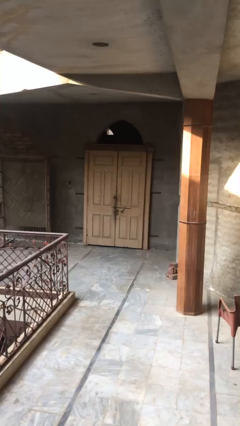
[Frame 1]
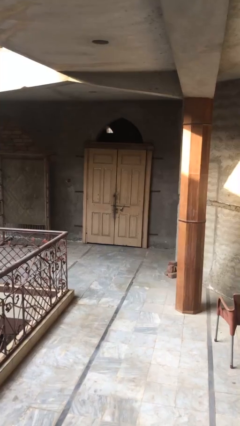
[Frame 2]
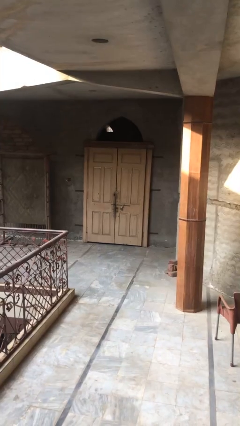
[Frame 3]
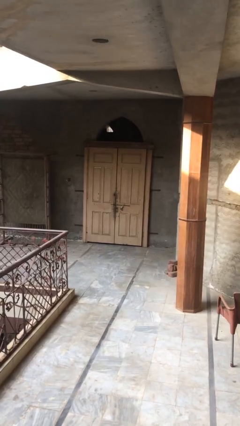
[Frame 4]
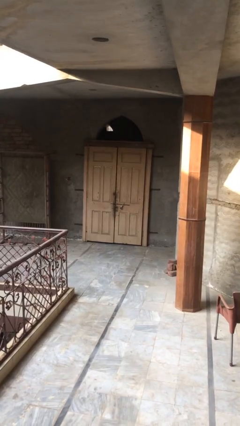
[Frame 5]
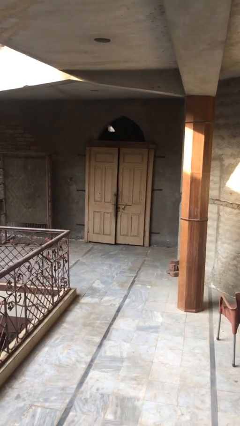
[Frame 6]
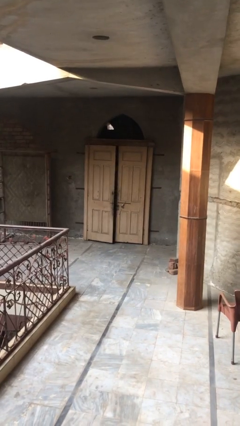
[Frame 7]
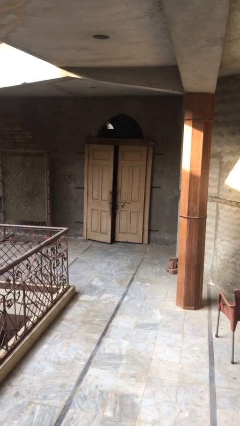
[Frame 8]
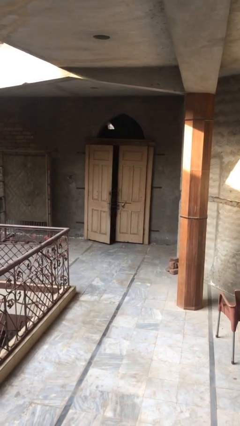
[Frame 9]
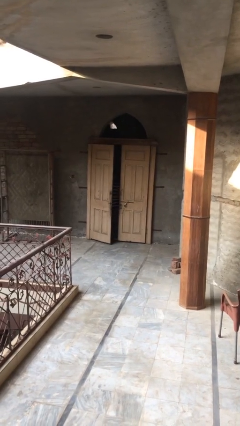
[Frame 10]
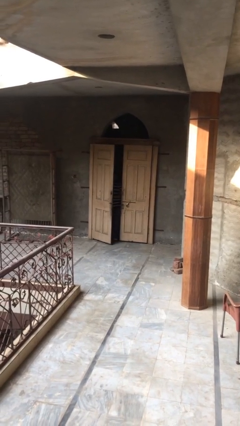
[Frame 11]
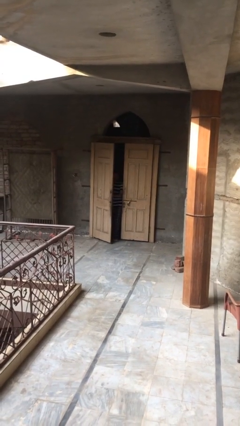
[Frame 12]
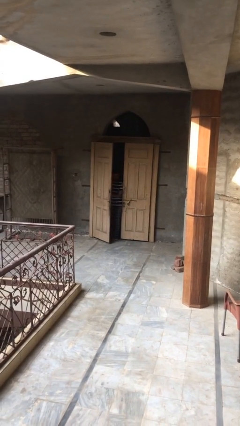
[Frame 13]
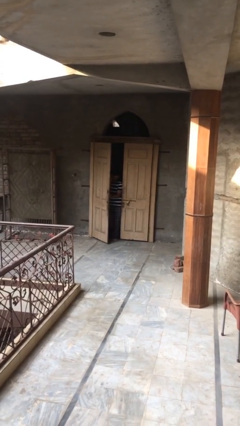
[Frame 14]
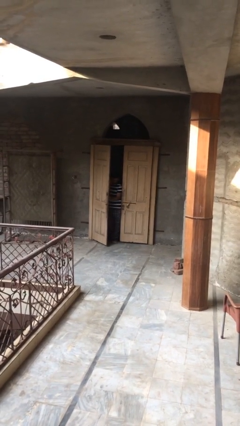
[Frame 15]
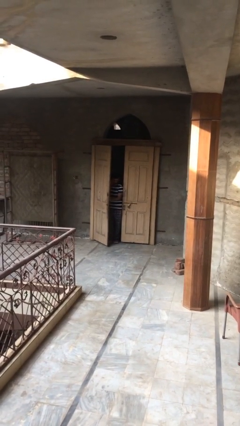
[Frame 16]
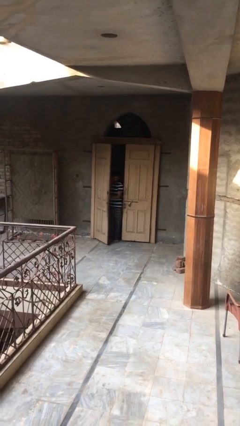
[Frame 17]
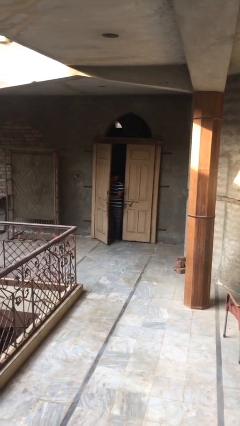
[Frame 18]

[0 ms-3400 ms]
person opens facility door

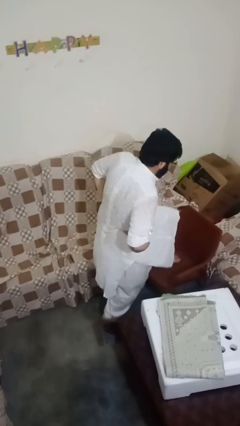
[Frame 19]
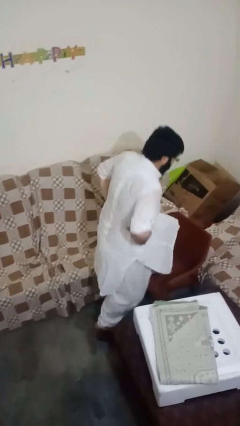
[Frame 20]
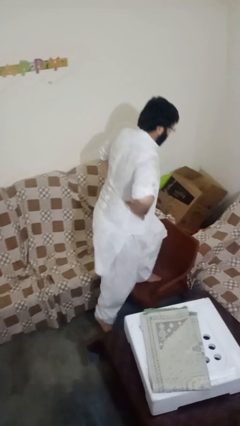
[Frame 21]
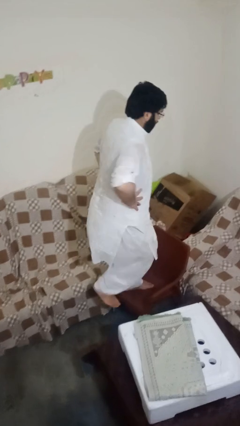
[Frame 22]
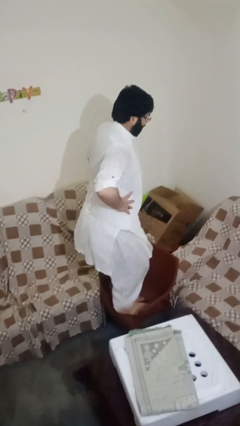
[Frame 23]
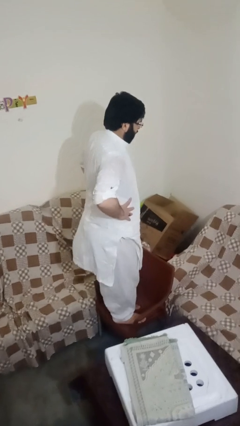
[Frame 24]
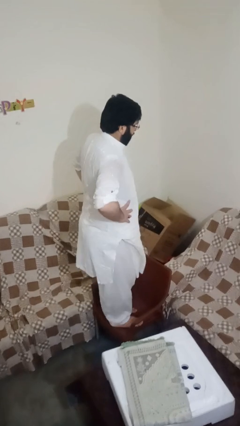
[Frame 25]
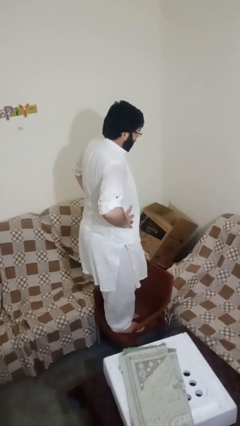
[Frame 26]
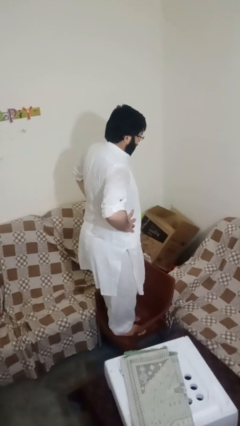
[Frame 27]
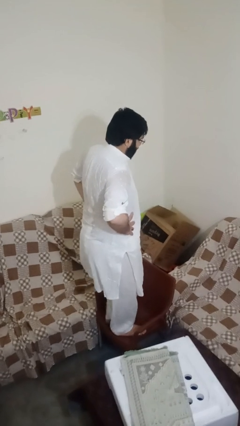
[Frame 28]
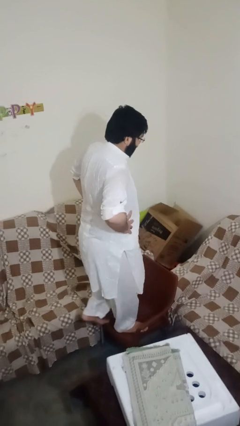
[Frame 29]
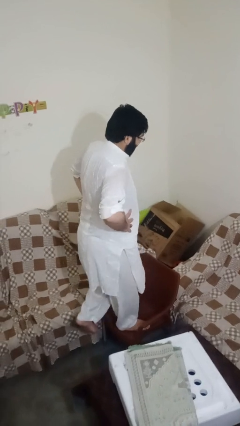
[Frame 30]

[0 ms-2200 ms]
person climbs on chair

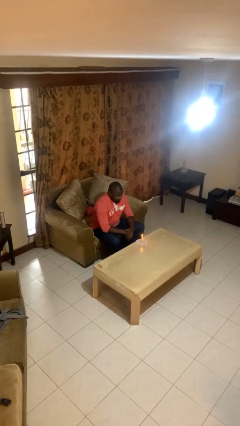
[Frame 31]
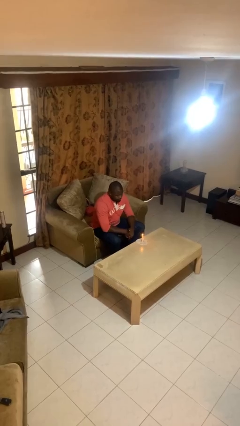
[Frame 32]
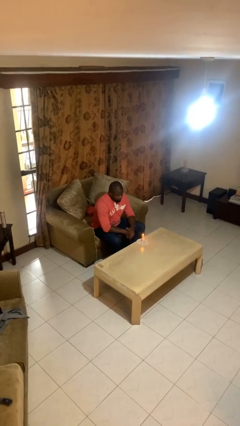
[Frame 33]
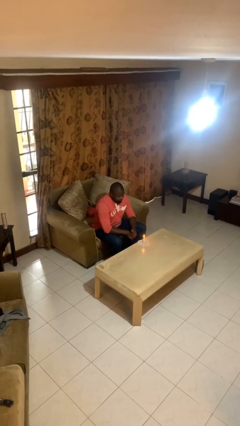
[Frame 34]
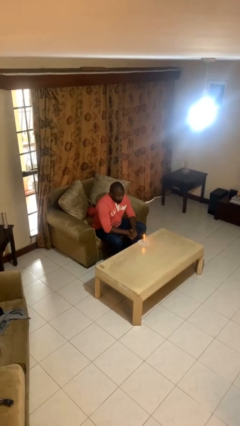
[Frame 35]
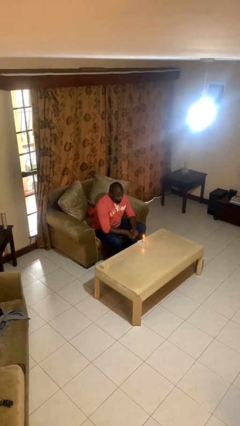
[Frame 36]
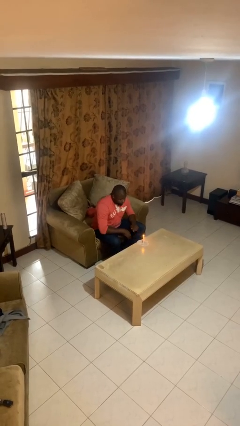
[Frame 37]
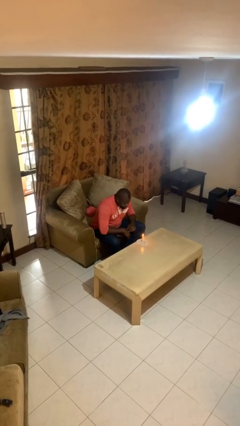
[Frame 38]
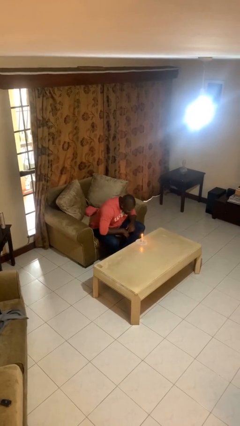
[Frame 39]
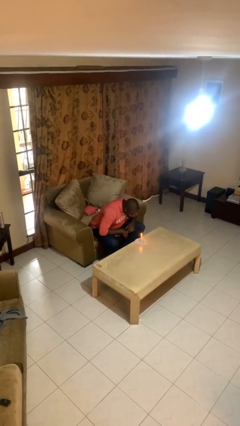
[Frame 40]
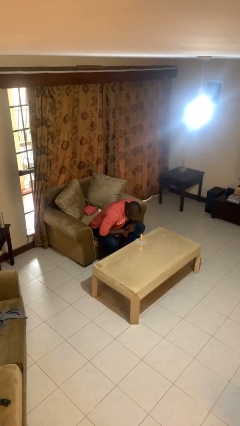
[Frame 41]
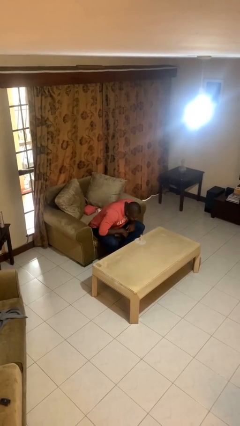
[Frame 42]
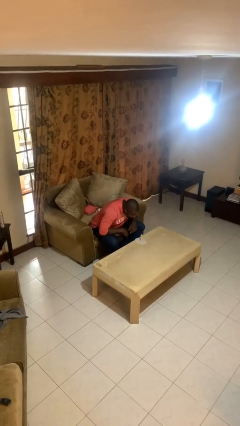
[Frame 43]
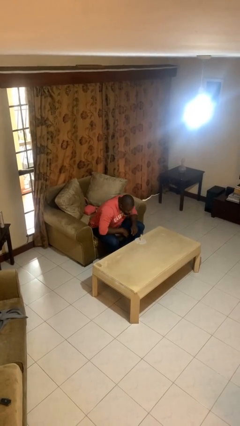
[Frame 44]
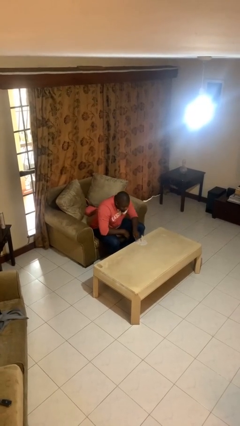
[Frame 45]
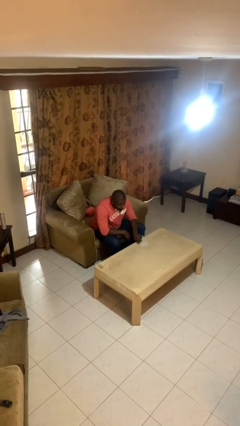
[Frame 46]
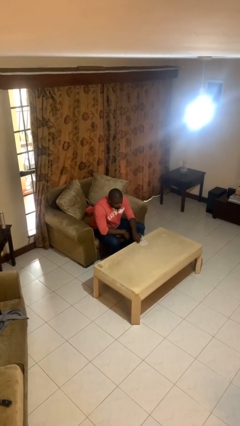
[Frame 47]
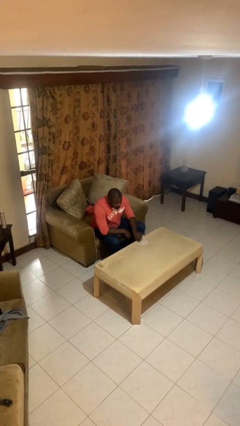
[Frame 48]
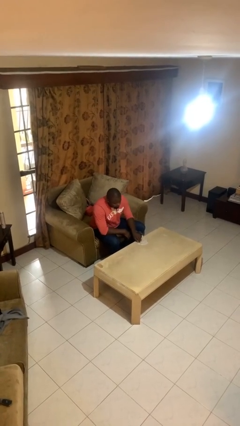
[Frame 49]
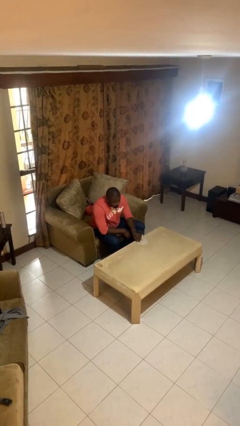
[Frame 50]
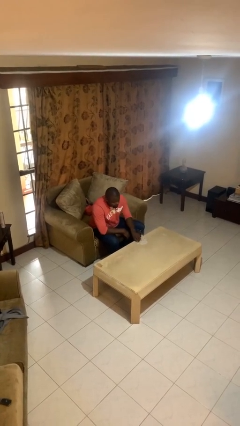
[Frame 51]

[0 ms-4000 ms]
person extinguishes candle

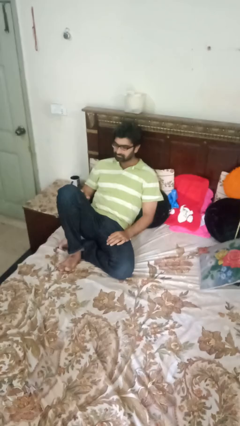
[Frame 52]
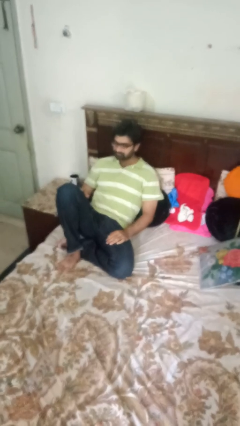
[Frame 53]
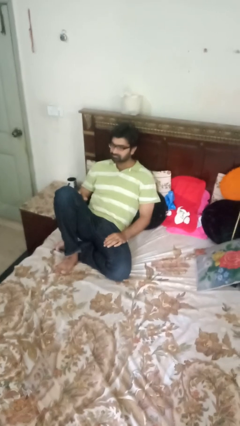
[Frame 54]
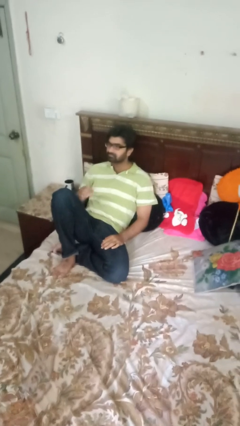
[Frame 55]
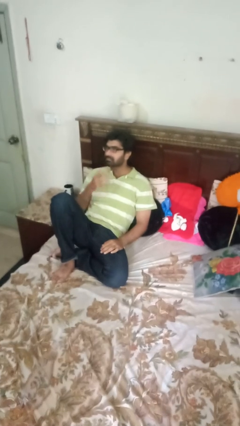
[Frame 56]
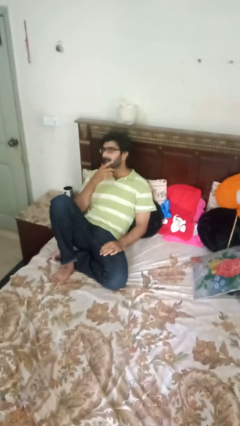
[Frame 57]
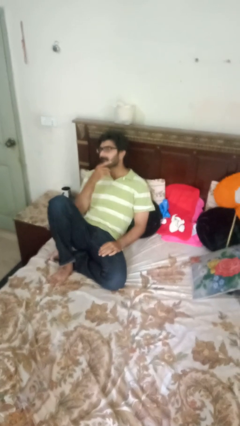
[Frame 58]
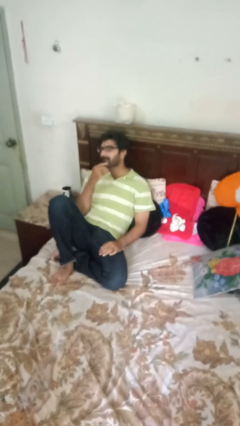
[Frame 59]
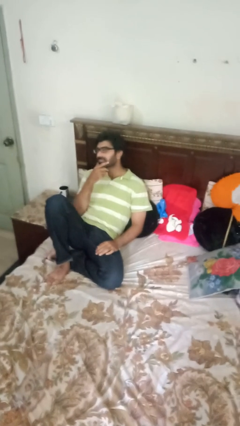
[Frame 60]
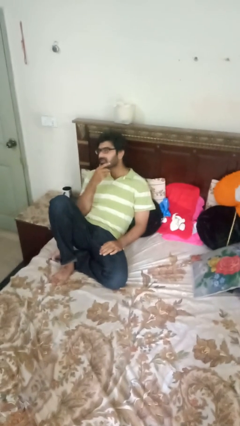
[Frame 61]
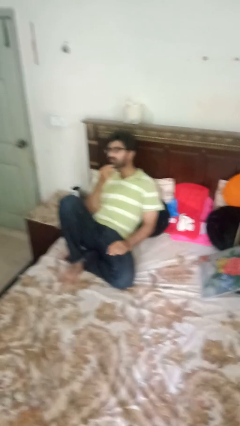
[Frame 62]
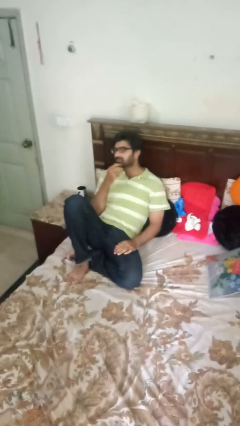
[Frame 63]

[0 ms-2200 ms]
person strokes chin

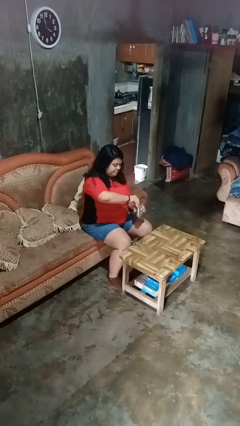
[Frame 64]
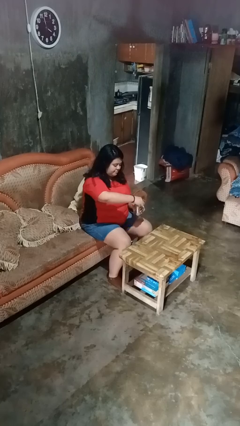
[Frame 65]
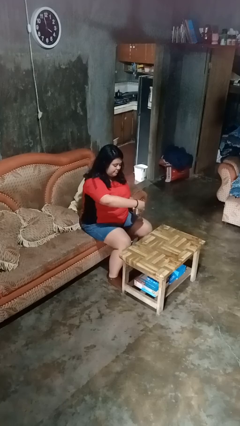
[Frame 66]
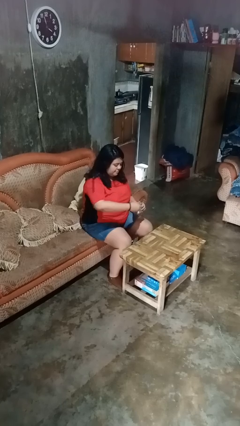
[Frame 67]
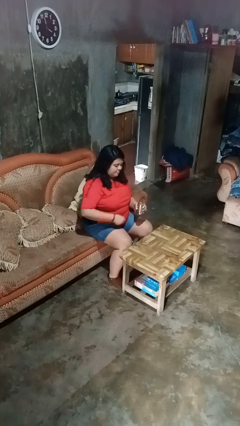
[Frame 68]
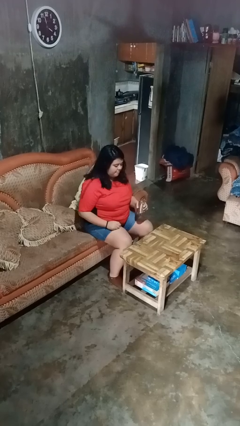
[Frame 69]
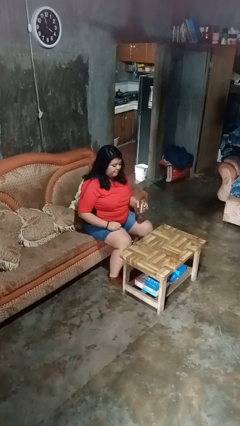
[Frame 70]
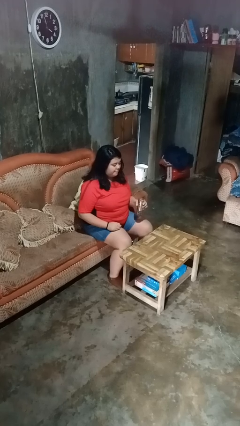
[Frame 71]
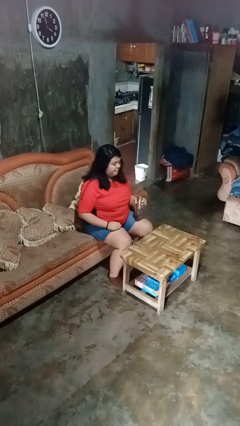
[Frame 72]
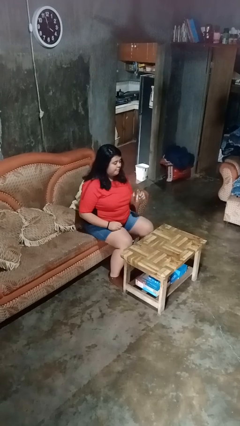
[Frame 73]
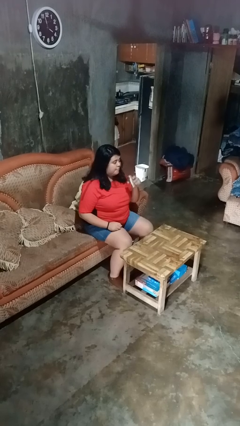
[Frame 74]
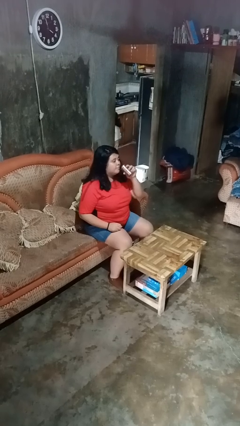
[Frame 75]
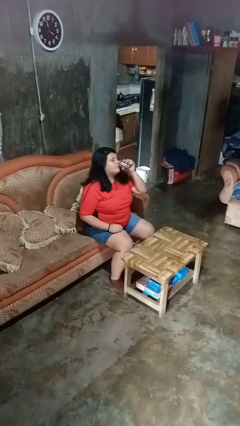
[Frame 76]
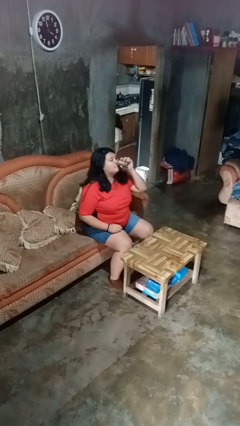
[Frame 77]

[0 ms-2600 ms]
person opens beverage can

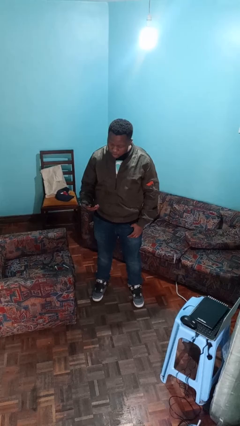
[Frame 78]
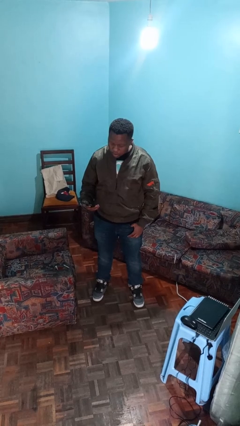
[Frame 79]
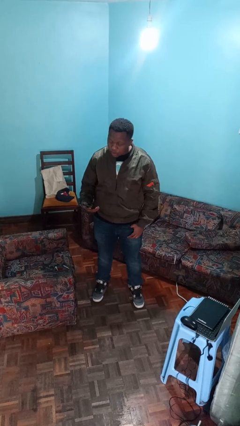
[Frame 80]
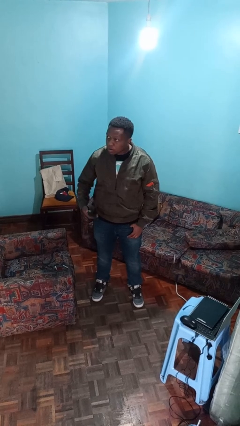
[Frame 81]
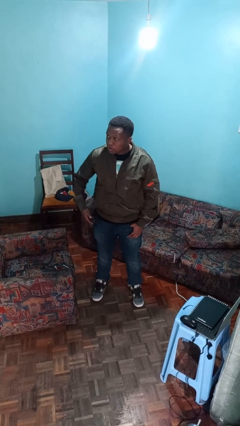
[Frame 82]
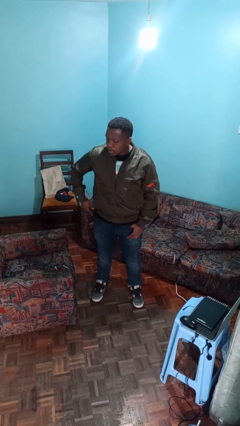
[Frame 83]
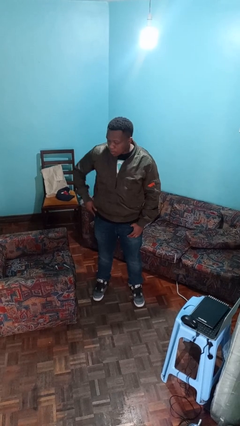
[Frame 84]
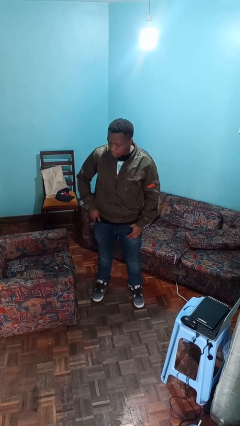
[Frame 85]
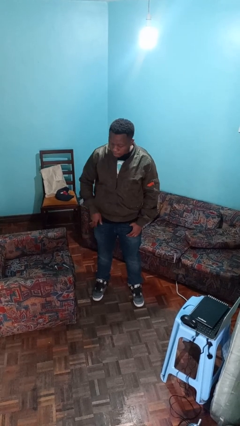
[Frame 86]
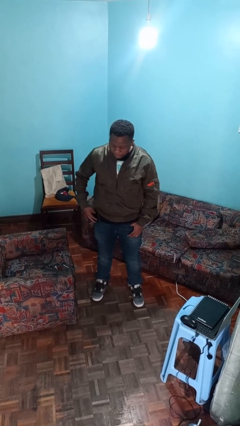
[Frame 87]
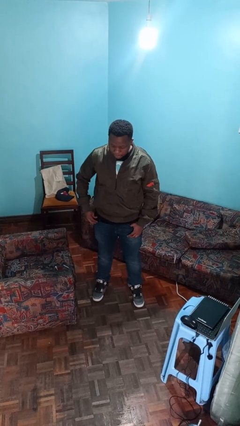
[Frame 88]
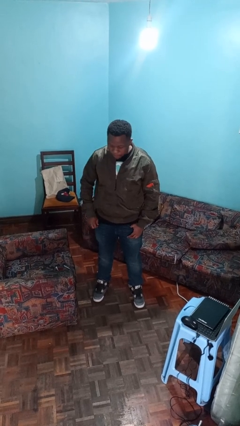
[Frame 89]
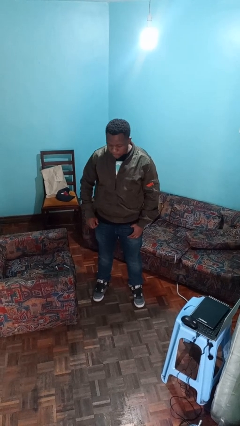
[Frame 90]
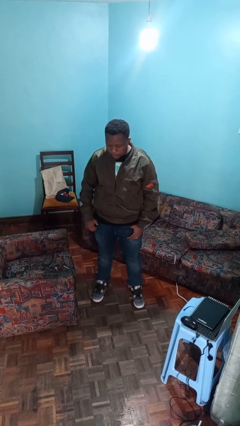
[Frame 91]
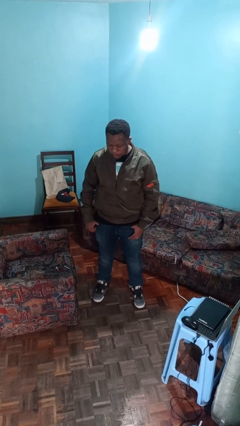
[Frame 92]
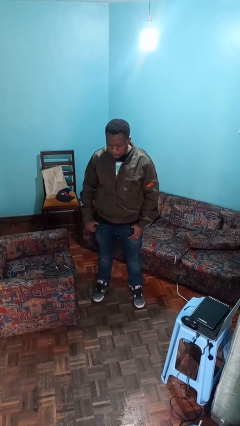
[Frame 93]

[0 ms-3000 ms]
person puts phone into pocket
